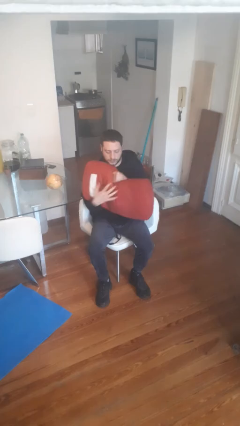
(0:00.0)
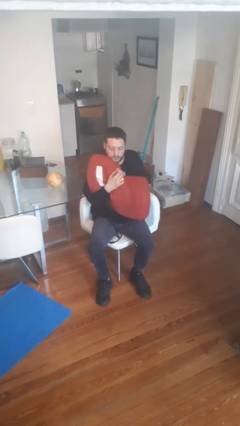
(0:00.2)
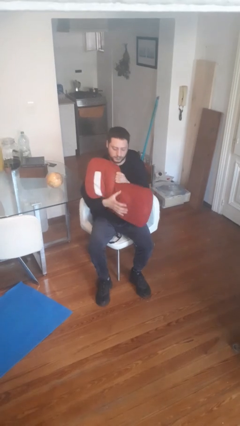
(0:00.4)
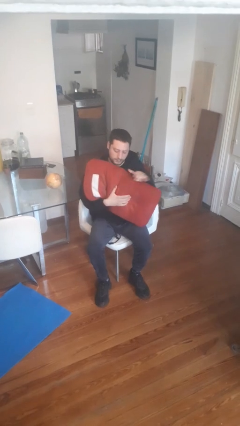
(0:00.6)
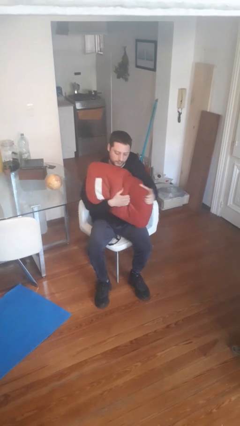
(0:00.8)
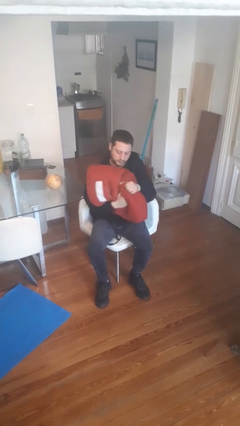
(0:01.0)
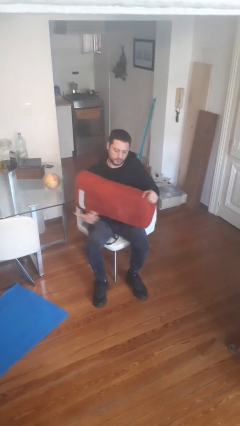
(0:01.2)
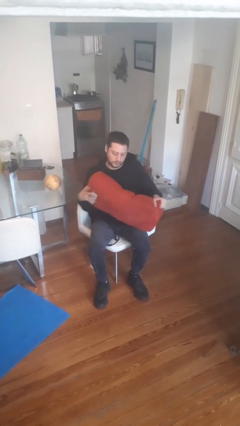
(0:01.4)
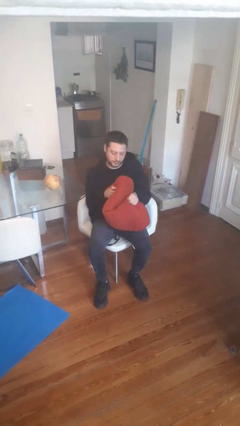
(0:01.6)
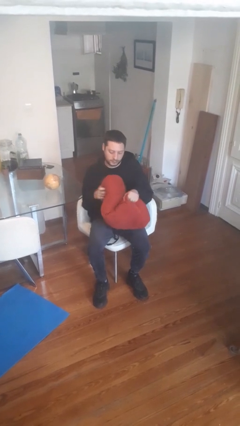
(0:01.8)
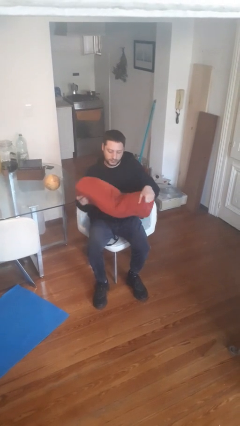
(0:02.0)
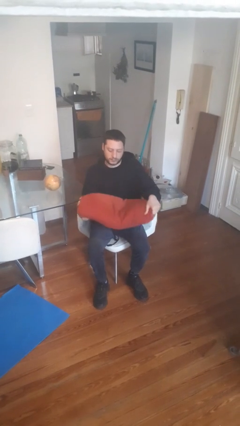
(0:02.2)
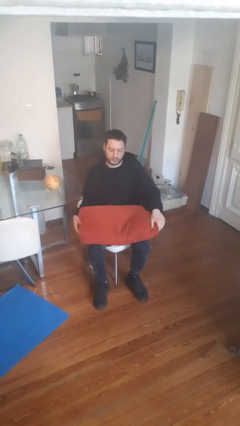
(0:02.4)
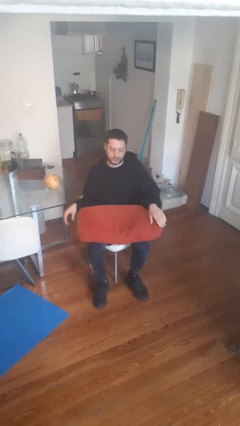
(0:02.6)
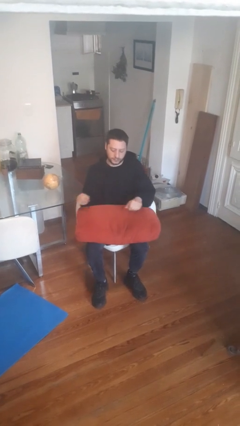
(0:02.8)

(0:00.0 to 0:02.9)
person squeezes object

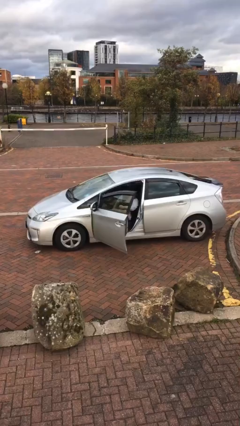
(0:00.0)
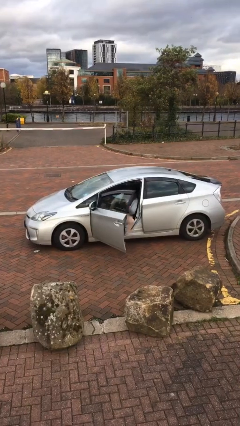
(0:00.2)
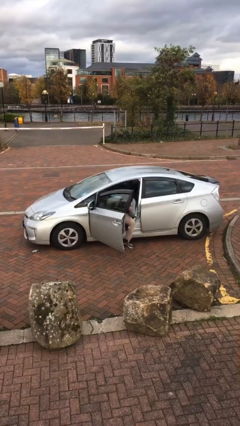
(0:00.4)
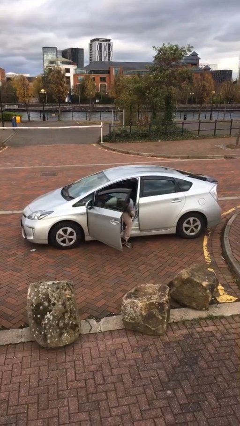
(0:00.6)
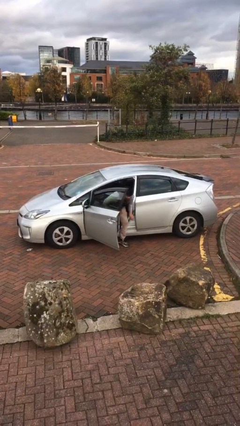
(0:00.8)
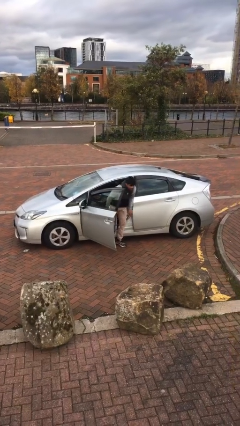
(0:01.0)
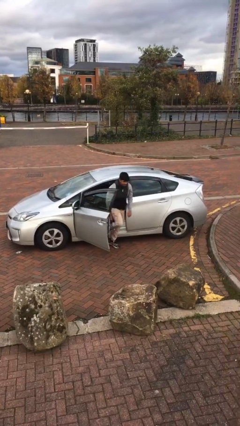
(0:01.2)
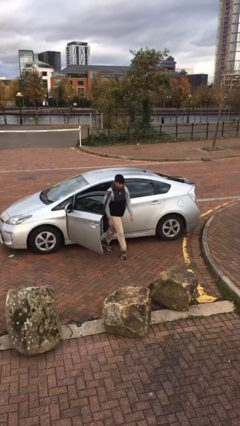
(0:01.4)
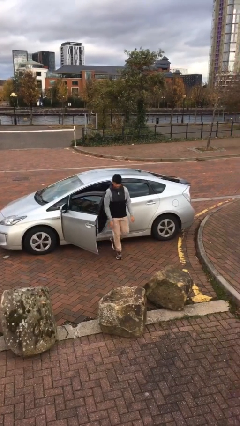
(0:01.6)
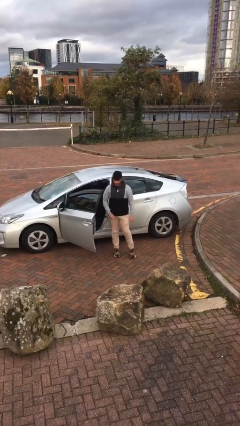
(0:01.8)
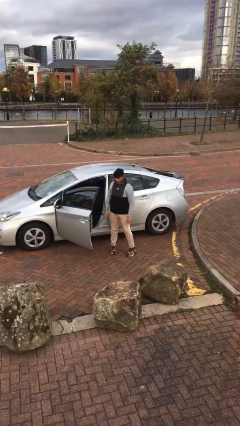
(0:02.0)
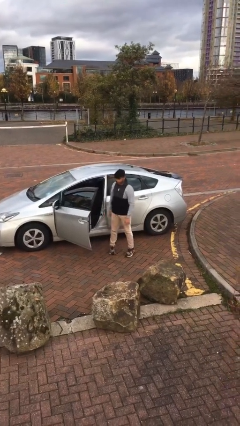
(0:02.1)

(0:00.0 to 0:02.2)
person exits car

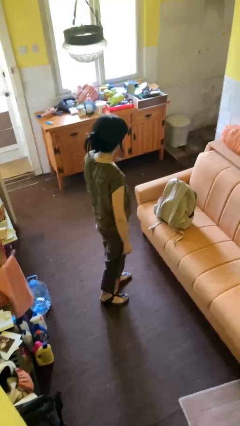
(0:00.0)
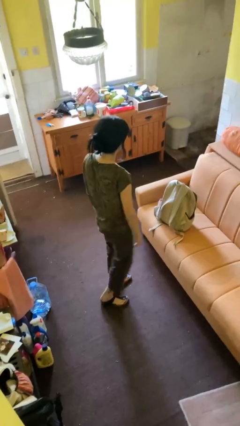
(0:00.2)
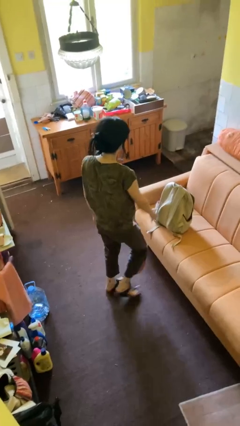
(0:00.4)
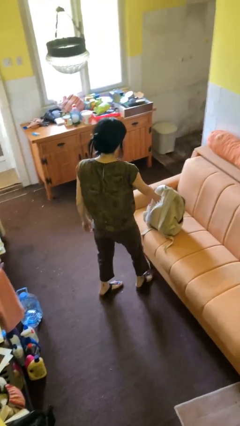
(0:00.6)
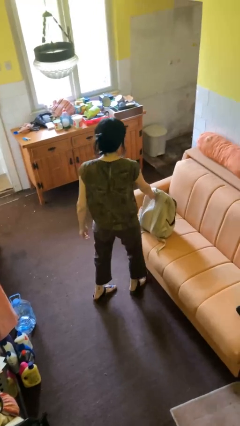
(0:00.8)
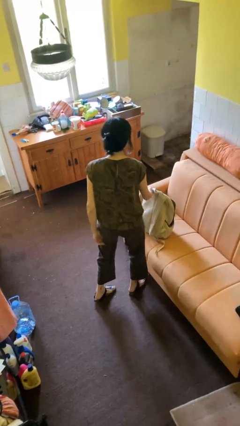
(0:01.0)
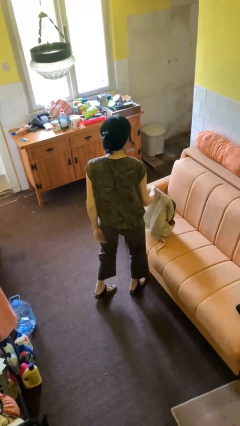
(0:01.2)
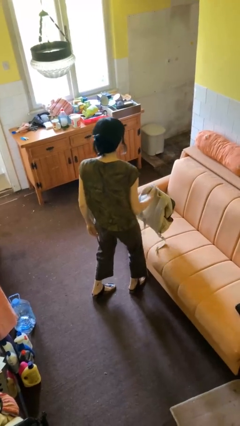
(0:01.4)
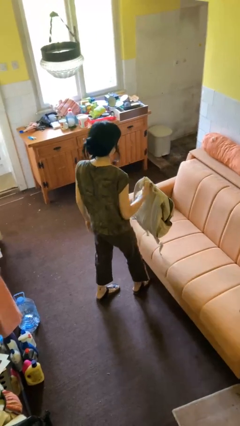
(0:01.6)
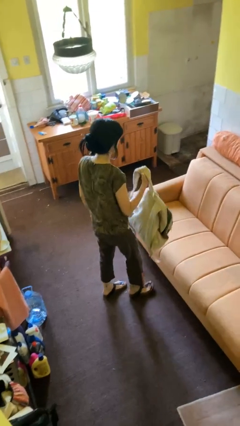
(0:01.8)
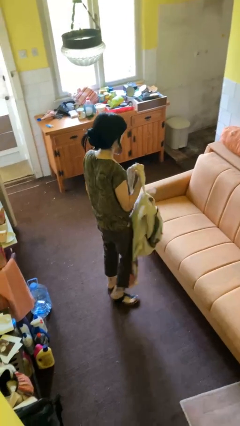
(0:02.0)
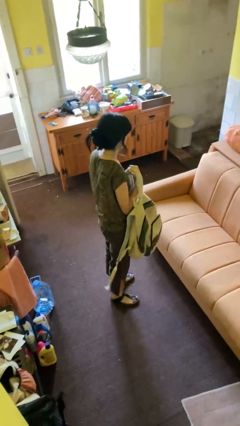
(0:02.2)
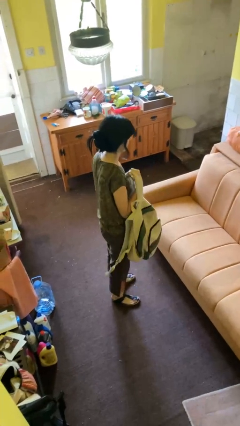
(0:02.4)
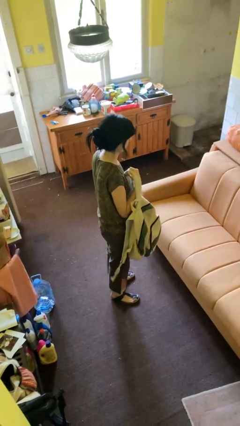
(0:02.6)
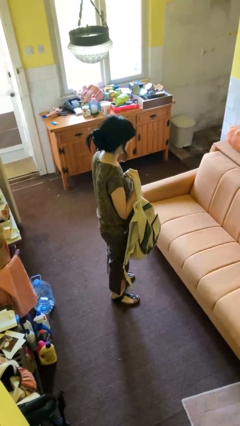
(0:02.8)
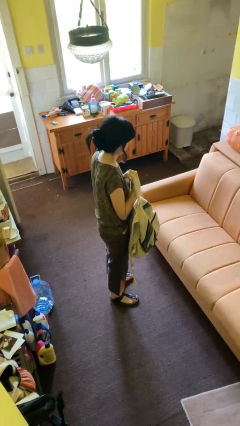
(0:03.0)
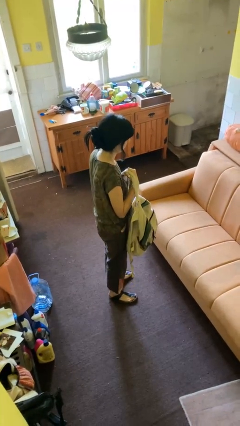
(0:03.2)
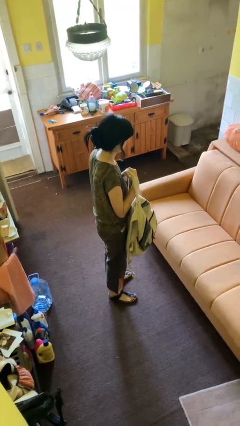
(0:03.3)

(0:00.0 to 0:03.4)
person picks up object from couch

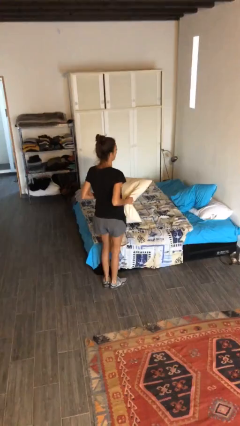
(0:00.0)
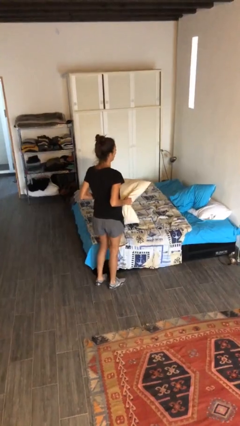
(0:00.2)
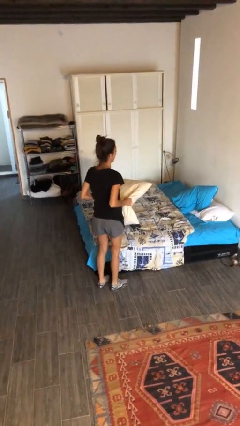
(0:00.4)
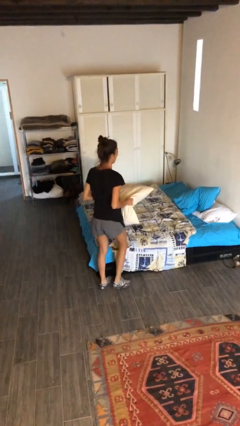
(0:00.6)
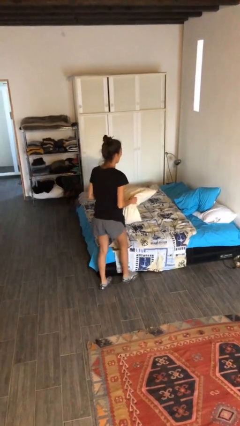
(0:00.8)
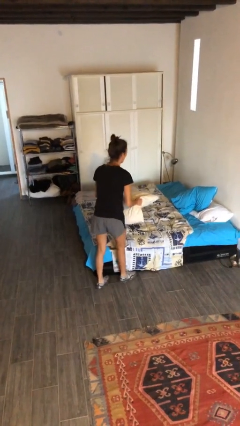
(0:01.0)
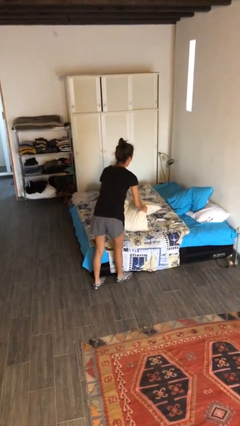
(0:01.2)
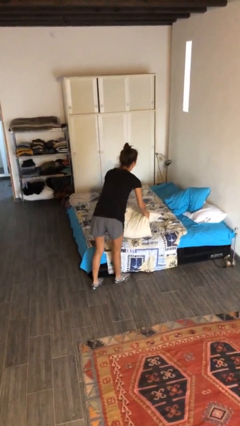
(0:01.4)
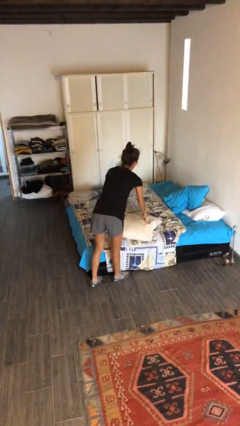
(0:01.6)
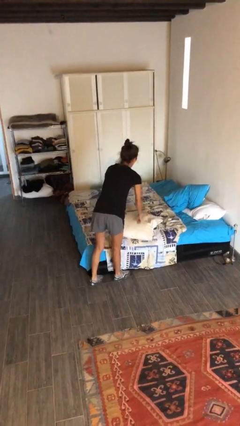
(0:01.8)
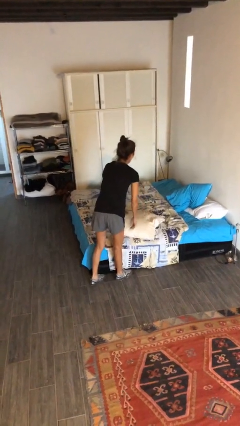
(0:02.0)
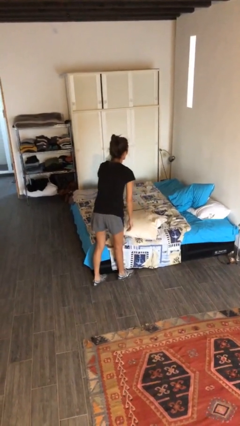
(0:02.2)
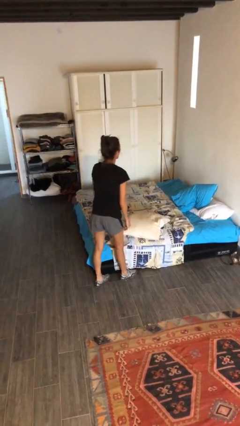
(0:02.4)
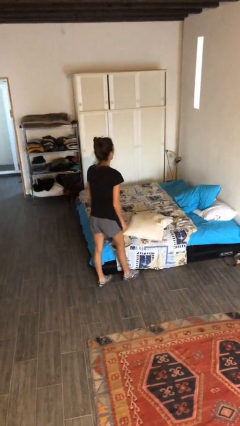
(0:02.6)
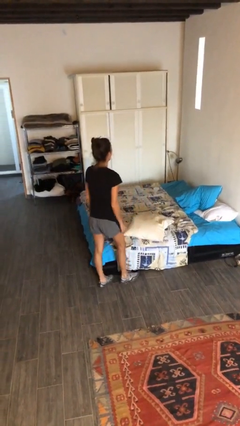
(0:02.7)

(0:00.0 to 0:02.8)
person puts down object on bed

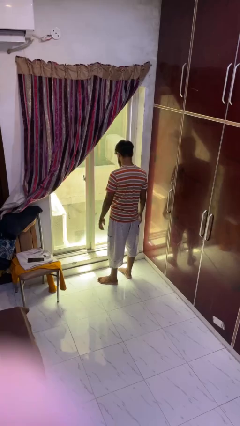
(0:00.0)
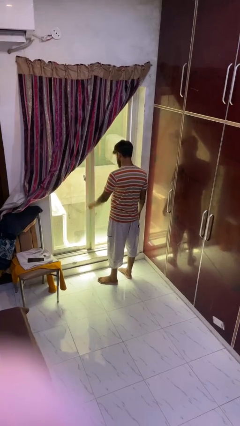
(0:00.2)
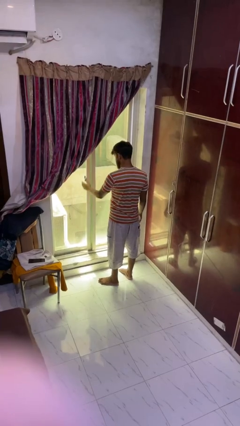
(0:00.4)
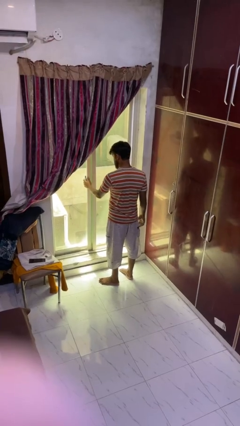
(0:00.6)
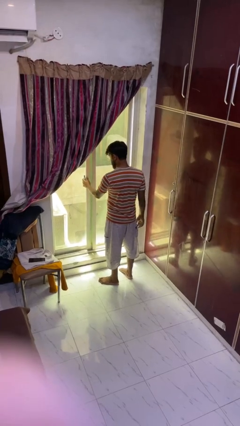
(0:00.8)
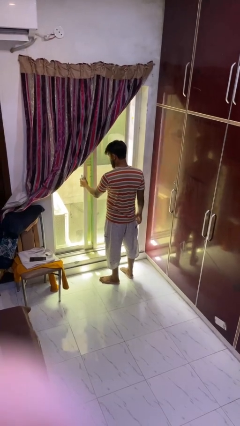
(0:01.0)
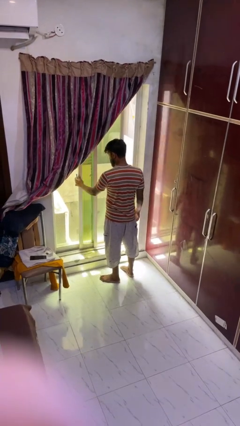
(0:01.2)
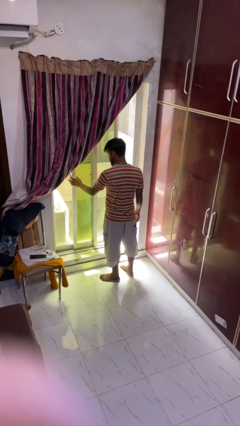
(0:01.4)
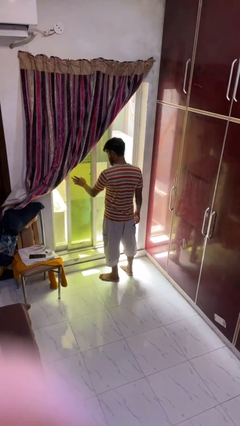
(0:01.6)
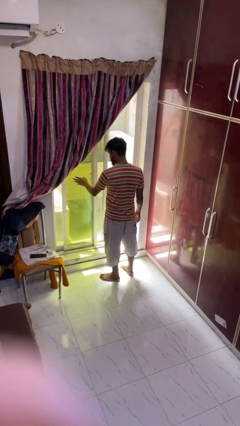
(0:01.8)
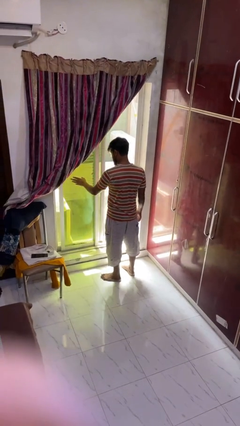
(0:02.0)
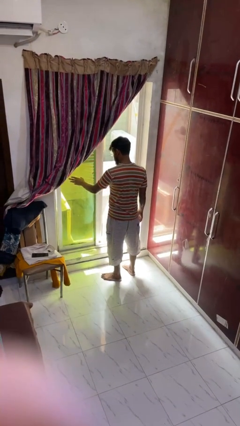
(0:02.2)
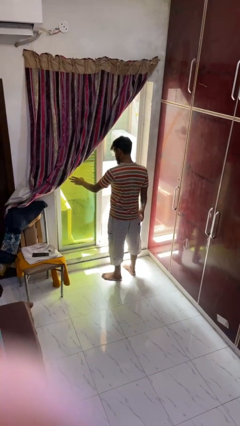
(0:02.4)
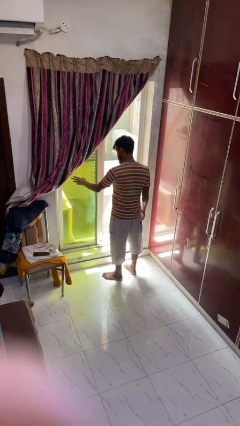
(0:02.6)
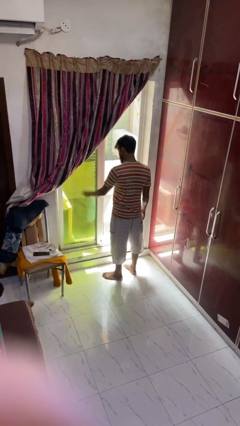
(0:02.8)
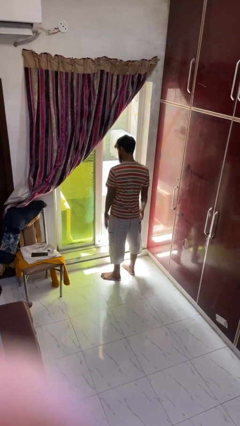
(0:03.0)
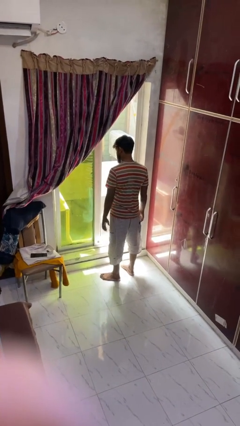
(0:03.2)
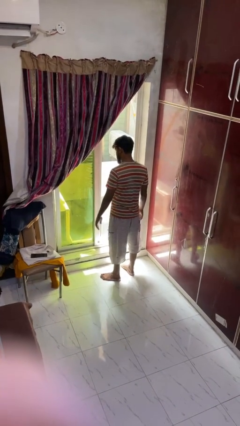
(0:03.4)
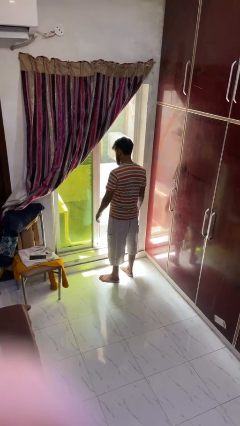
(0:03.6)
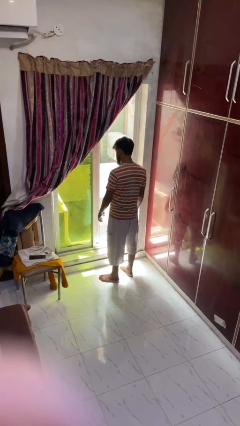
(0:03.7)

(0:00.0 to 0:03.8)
person opens home window

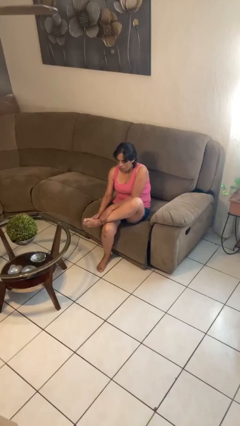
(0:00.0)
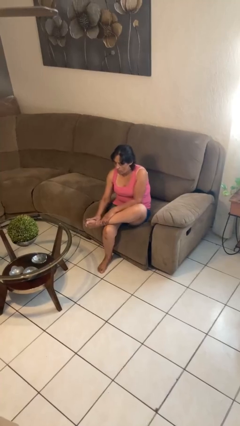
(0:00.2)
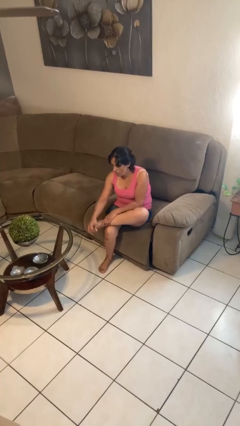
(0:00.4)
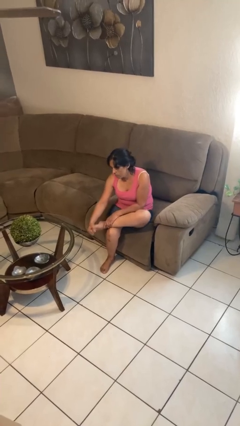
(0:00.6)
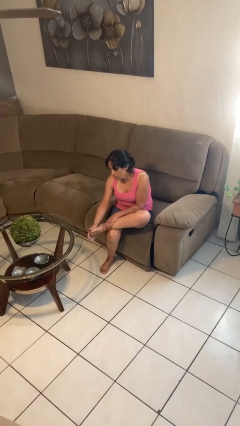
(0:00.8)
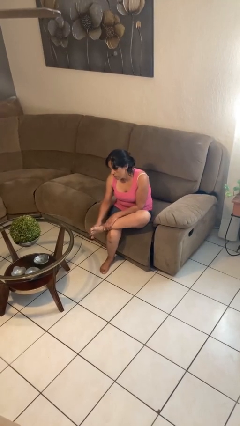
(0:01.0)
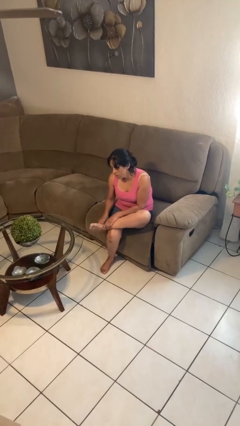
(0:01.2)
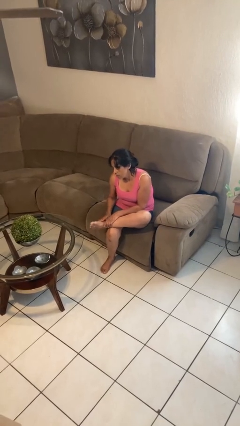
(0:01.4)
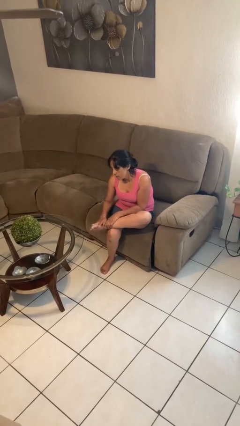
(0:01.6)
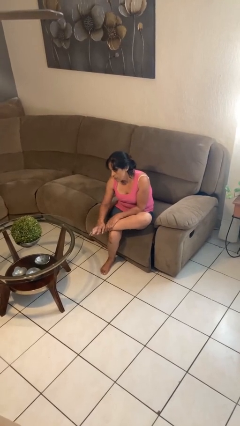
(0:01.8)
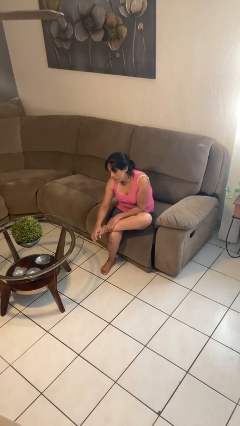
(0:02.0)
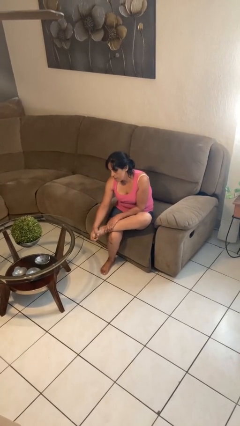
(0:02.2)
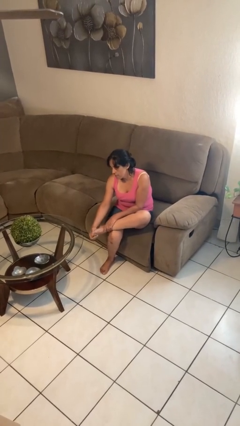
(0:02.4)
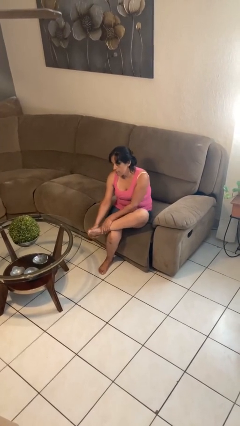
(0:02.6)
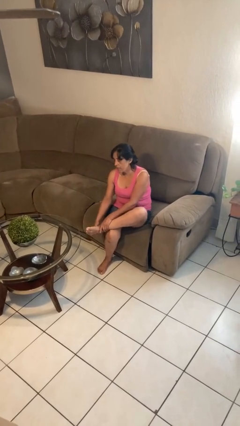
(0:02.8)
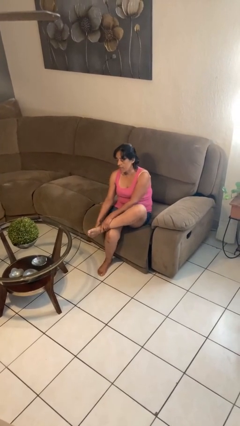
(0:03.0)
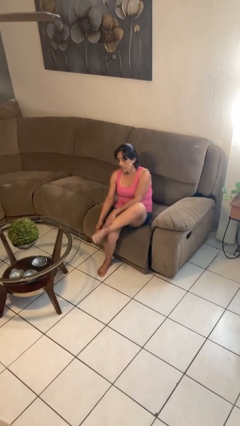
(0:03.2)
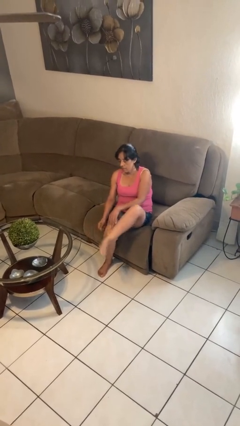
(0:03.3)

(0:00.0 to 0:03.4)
person rubs foot
